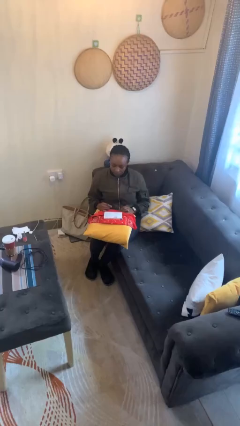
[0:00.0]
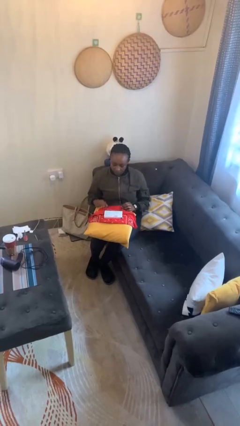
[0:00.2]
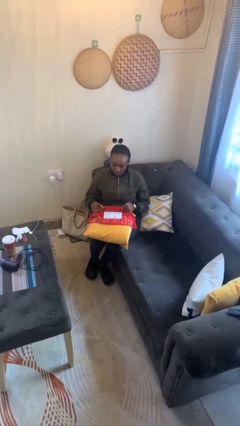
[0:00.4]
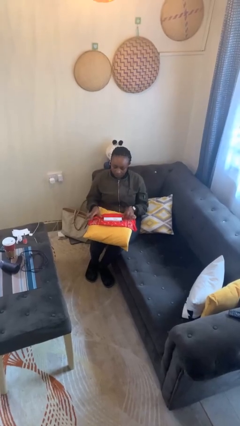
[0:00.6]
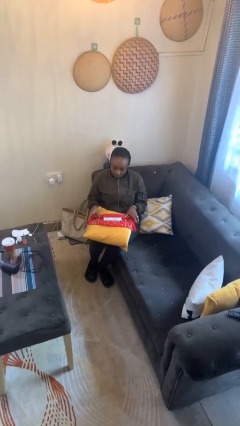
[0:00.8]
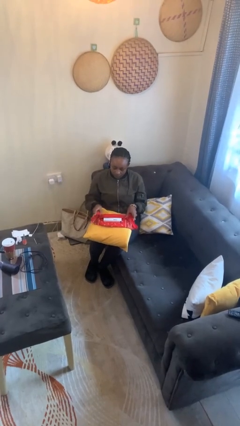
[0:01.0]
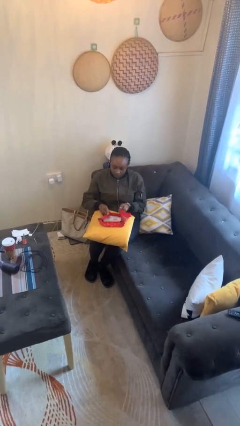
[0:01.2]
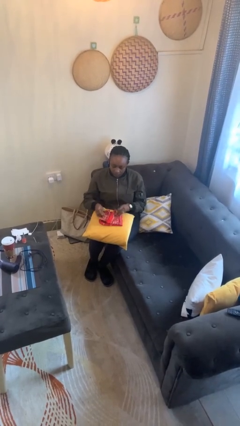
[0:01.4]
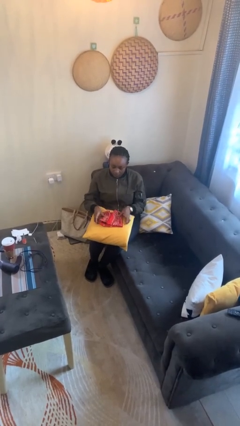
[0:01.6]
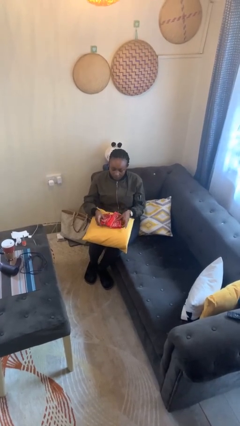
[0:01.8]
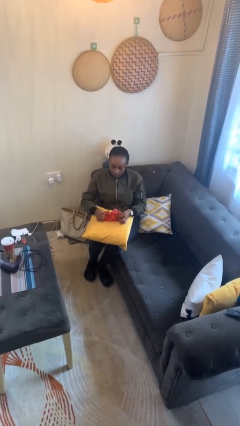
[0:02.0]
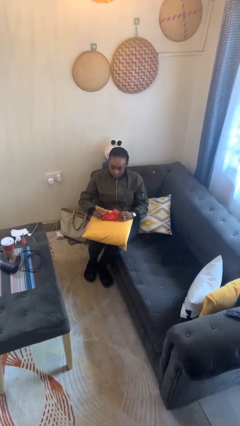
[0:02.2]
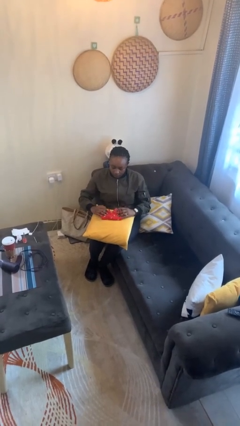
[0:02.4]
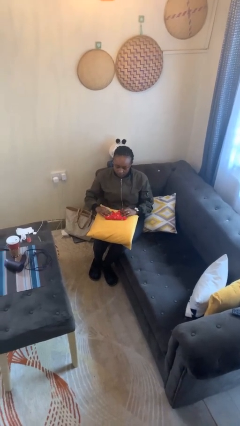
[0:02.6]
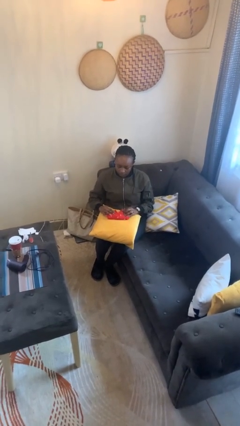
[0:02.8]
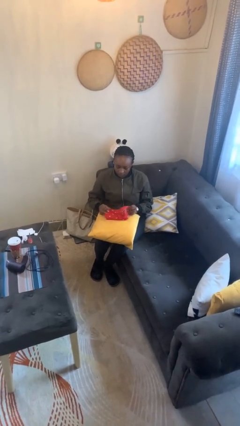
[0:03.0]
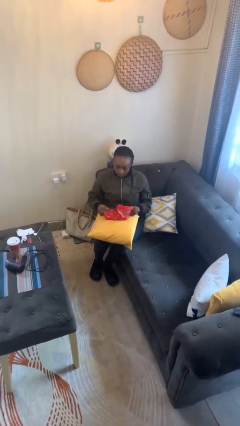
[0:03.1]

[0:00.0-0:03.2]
person wraps box

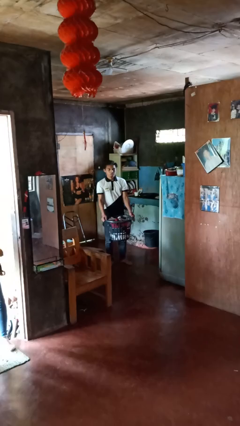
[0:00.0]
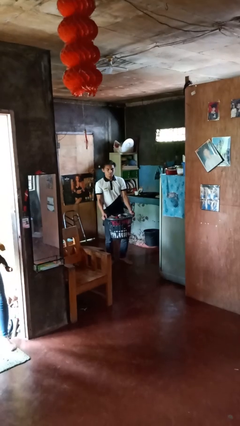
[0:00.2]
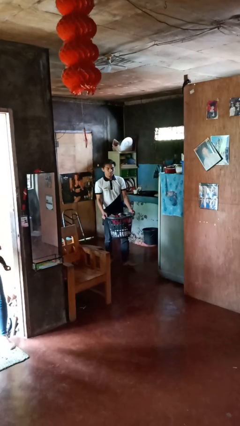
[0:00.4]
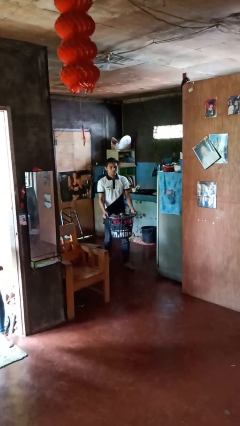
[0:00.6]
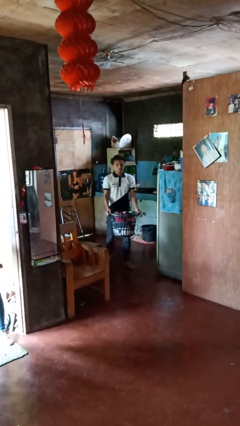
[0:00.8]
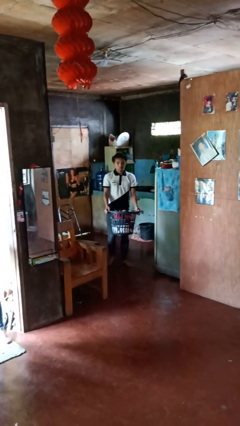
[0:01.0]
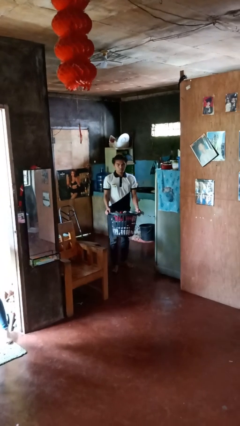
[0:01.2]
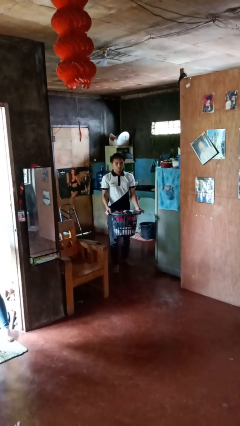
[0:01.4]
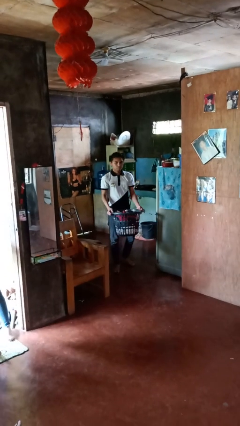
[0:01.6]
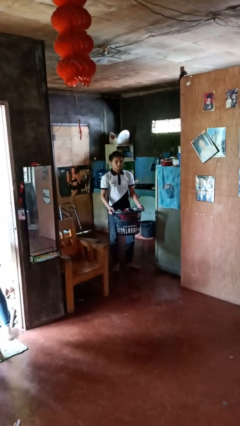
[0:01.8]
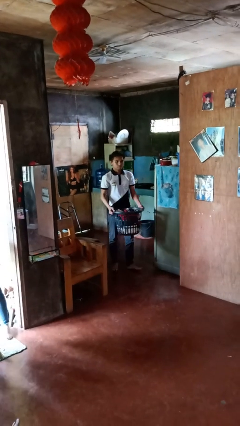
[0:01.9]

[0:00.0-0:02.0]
person carries laundry basket

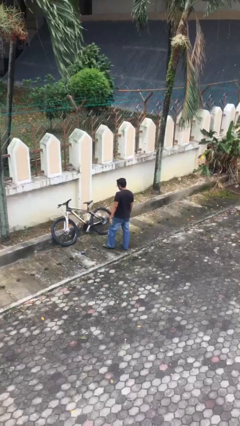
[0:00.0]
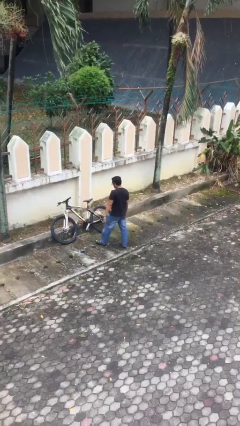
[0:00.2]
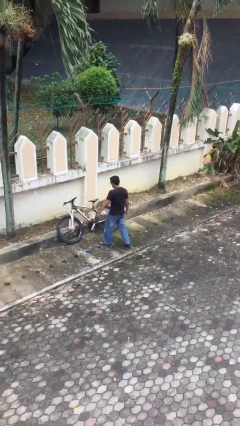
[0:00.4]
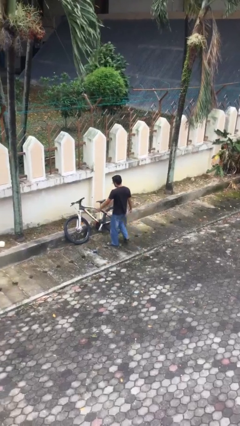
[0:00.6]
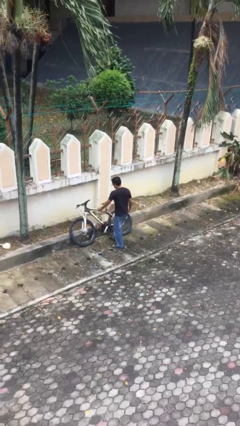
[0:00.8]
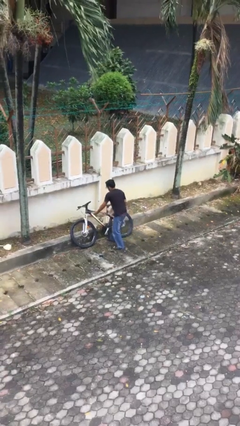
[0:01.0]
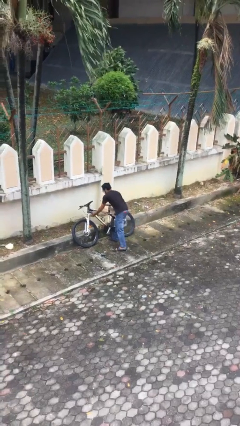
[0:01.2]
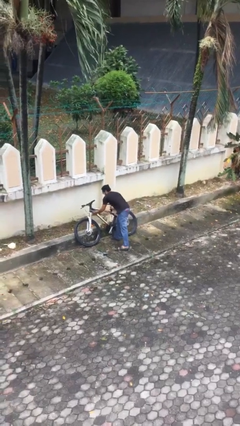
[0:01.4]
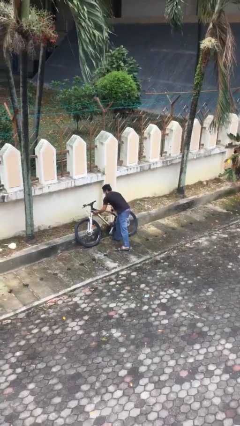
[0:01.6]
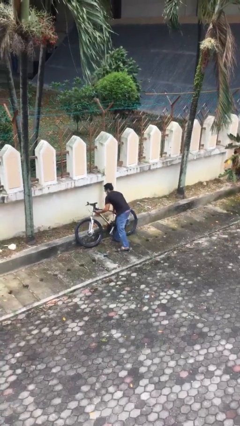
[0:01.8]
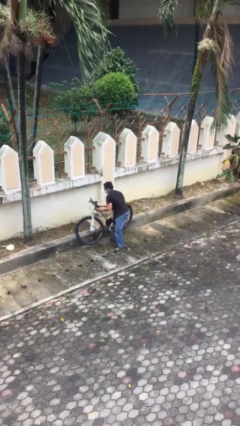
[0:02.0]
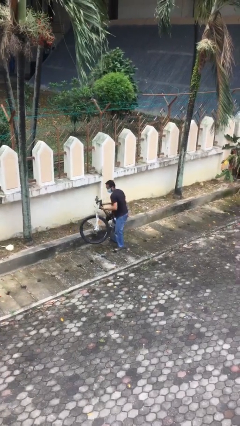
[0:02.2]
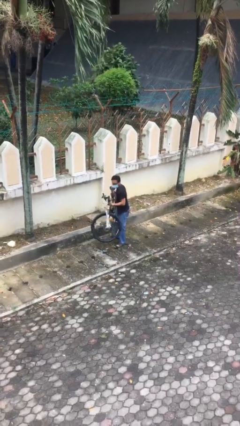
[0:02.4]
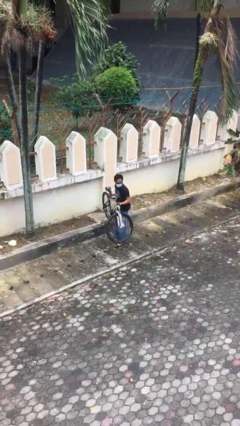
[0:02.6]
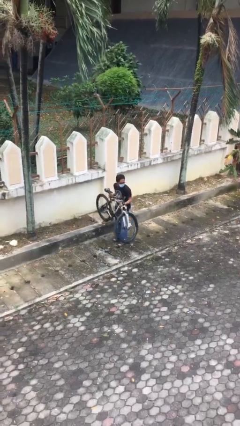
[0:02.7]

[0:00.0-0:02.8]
person picks up object from floor

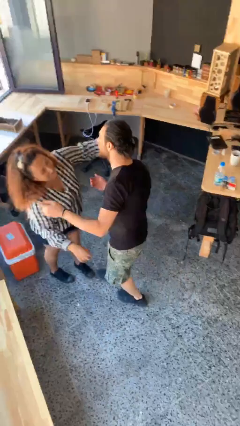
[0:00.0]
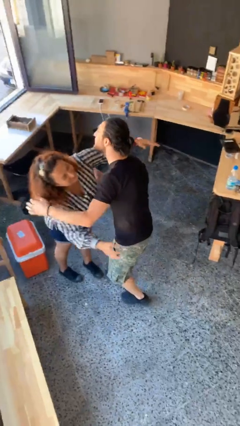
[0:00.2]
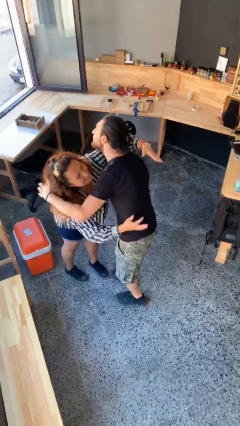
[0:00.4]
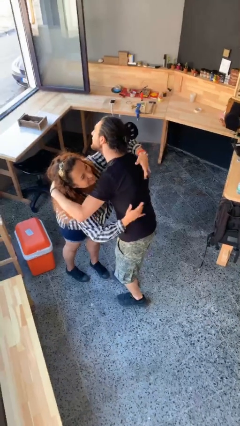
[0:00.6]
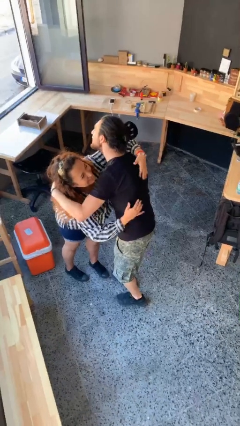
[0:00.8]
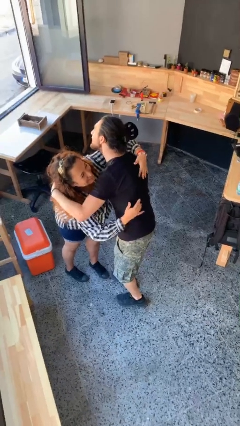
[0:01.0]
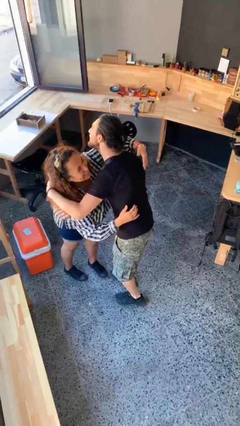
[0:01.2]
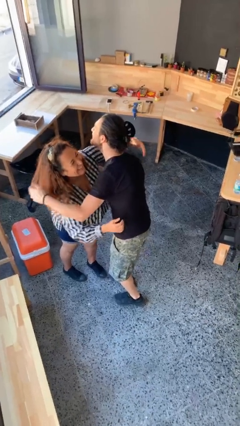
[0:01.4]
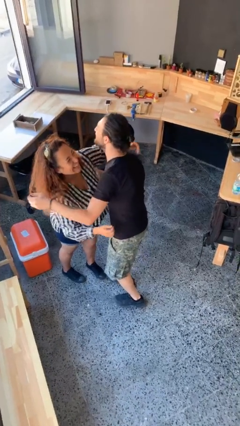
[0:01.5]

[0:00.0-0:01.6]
person embraces person

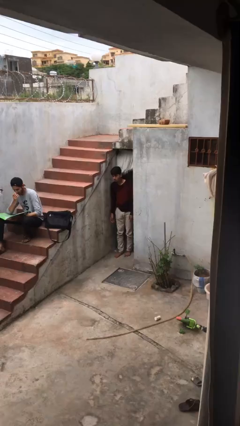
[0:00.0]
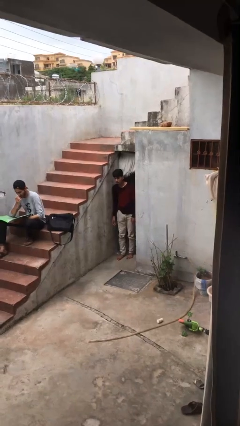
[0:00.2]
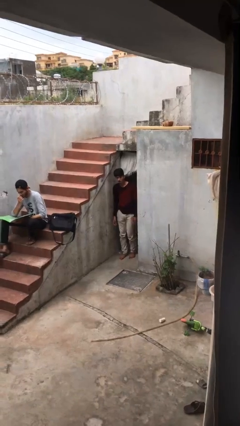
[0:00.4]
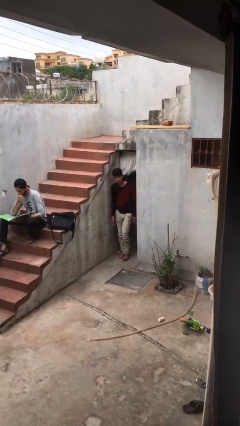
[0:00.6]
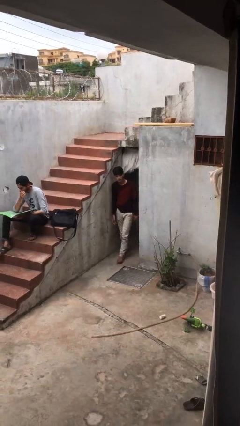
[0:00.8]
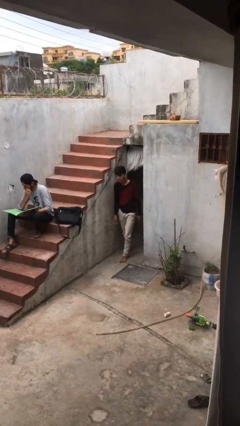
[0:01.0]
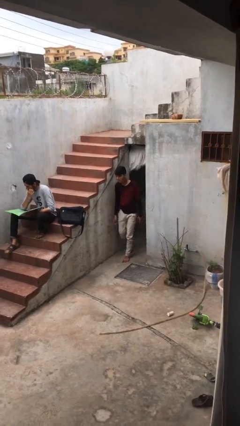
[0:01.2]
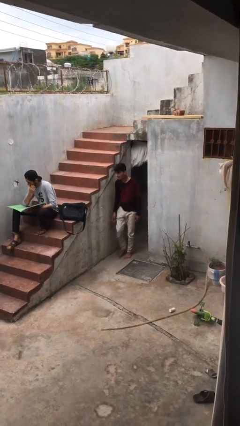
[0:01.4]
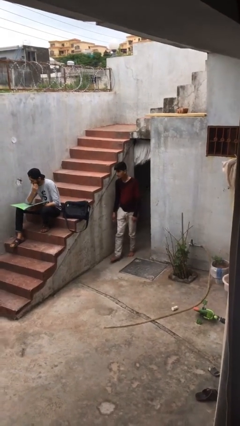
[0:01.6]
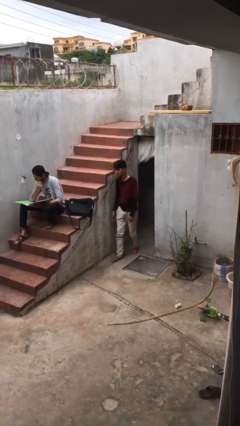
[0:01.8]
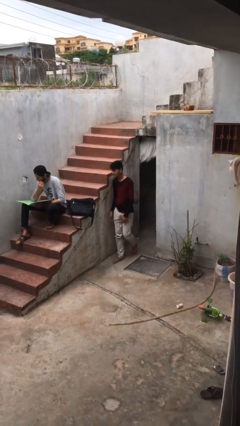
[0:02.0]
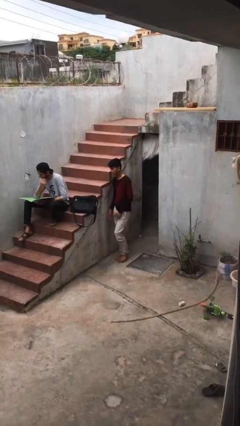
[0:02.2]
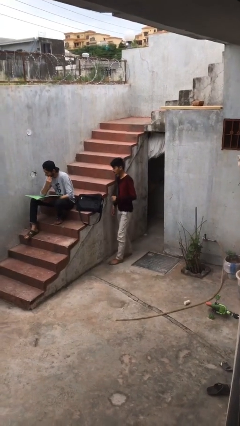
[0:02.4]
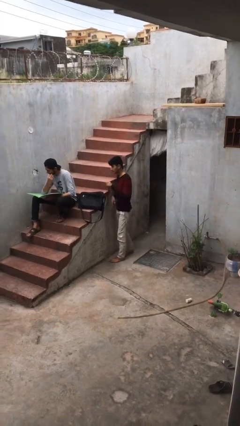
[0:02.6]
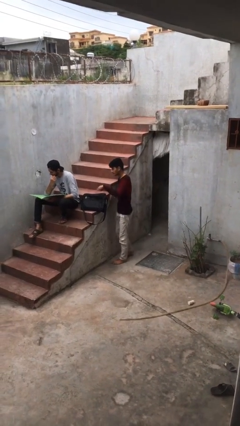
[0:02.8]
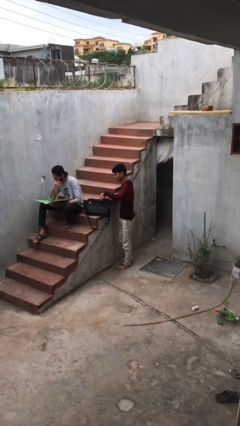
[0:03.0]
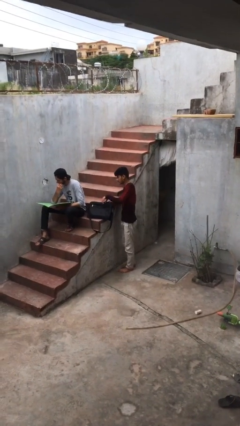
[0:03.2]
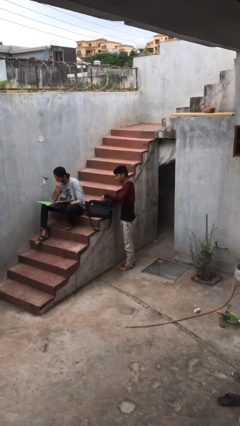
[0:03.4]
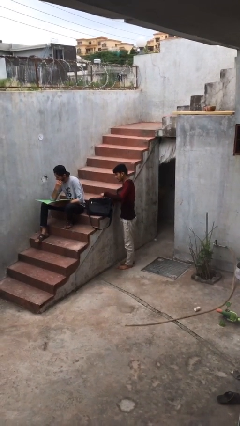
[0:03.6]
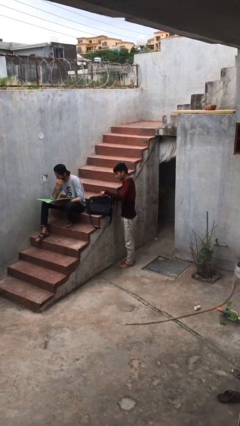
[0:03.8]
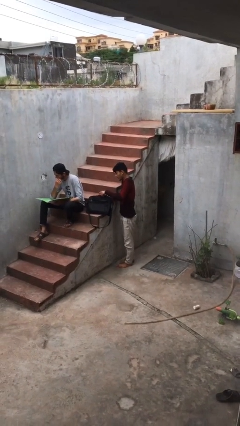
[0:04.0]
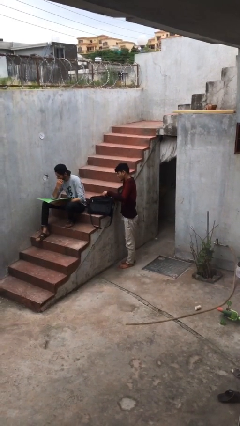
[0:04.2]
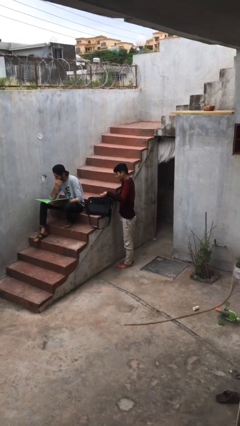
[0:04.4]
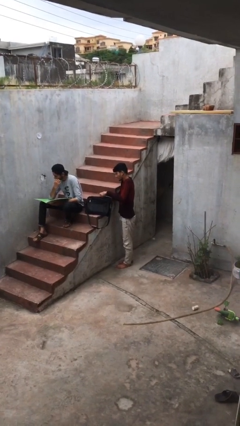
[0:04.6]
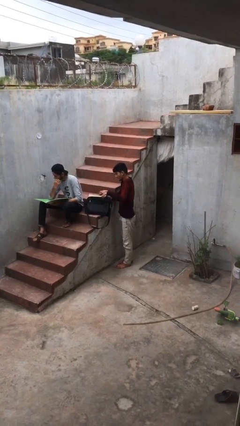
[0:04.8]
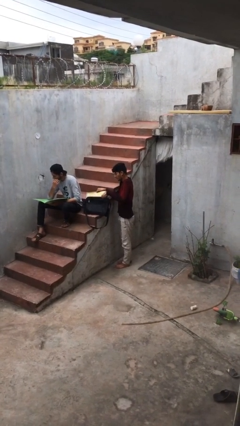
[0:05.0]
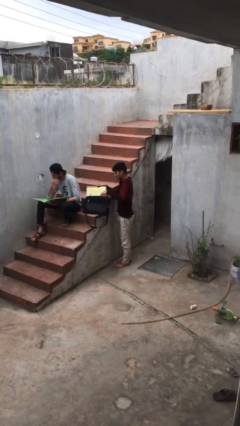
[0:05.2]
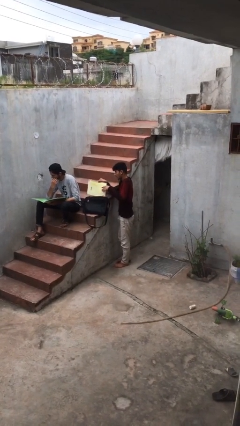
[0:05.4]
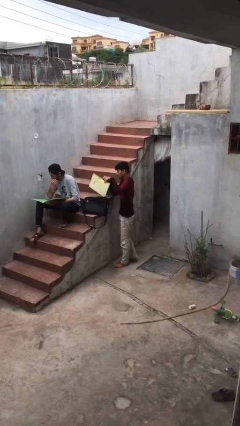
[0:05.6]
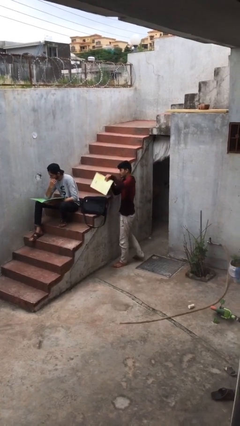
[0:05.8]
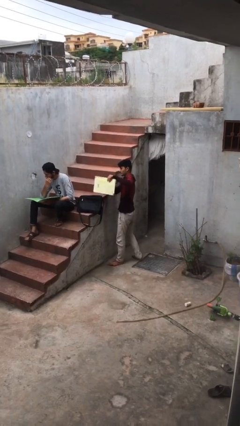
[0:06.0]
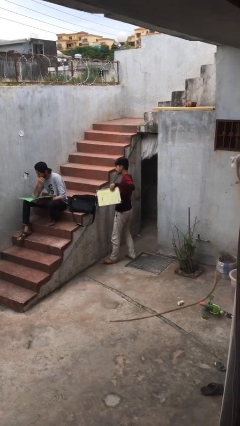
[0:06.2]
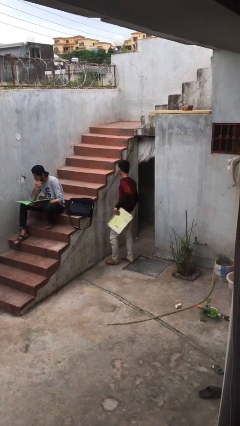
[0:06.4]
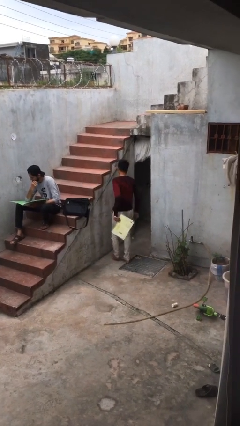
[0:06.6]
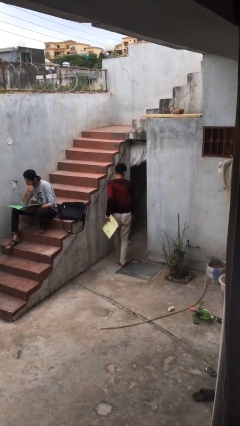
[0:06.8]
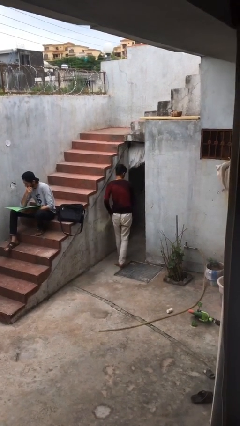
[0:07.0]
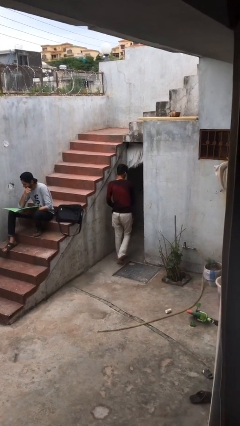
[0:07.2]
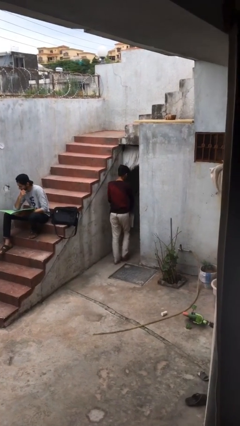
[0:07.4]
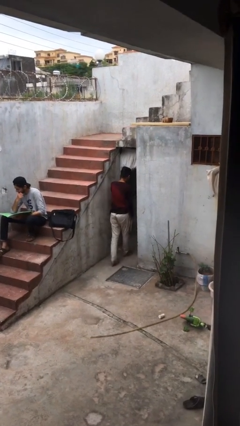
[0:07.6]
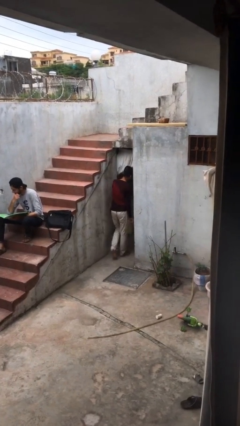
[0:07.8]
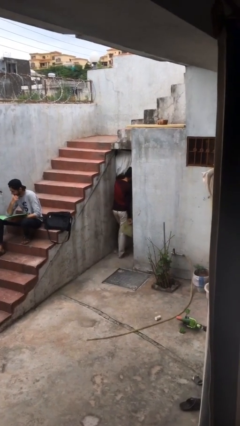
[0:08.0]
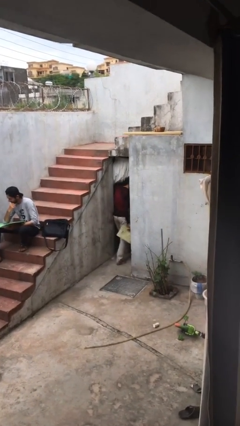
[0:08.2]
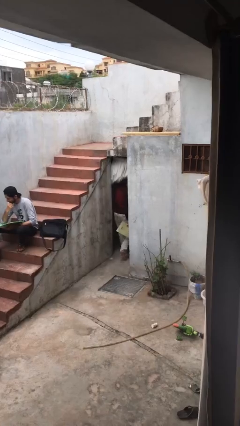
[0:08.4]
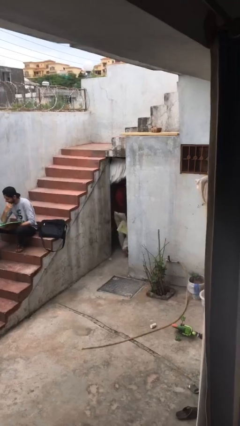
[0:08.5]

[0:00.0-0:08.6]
person steals object from person
